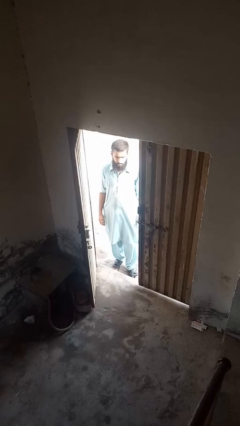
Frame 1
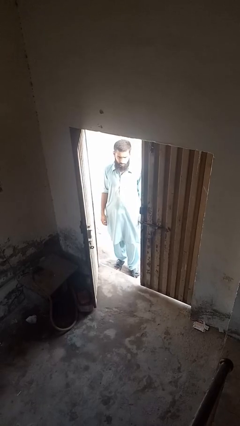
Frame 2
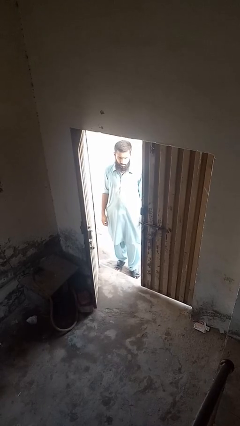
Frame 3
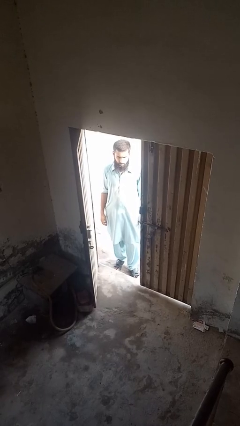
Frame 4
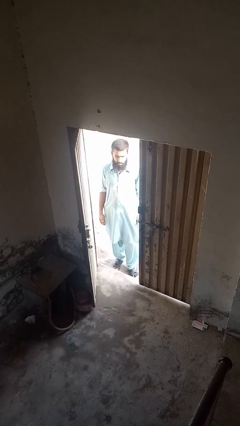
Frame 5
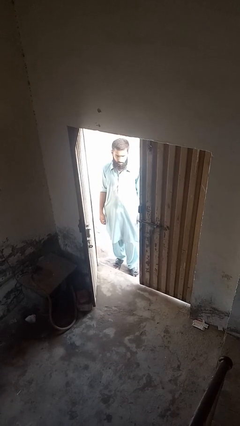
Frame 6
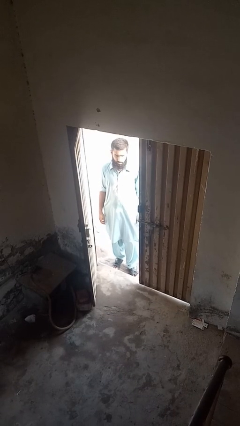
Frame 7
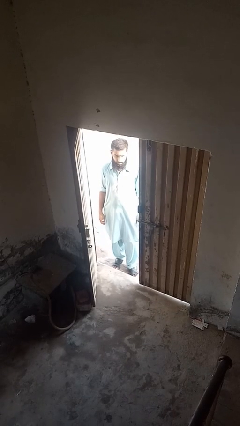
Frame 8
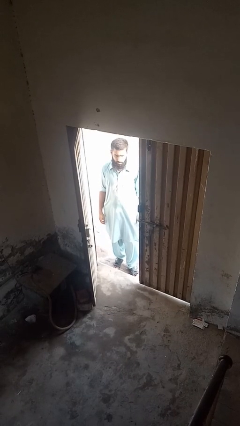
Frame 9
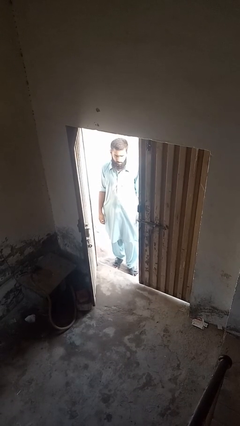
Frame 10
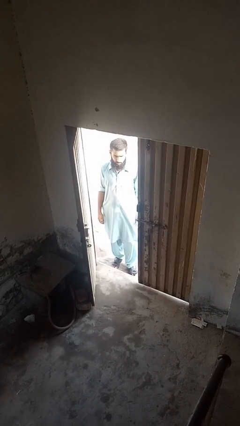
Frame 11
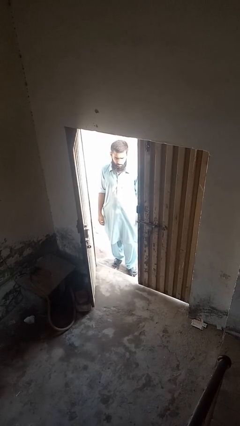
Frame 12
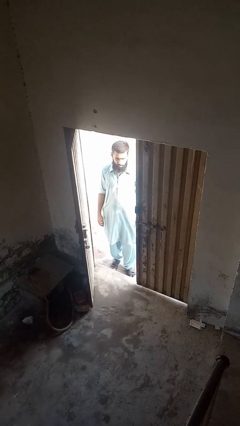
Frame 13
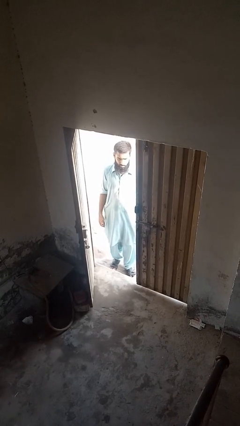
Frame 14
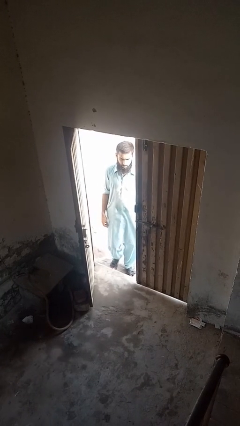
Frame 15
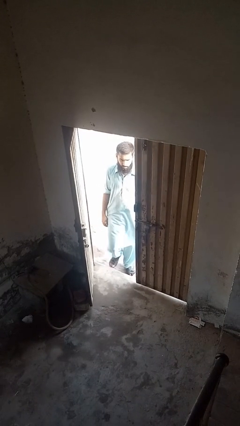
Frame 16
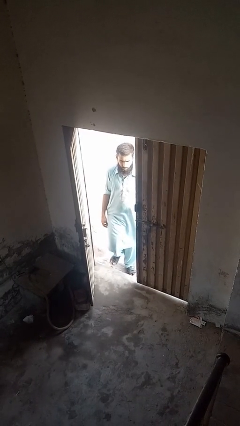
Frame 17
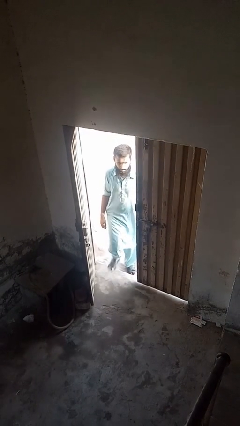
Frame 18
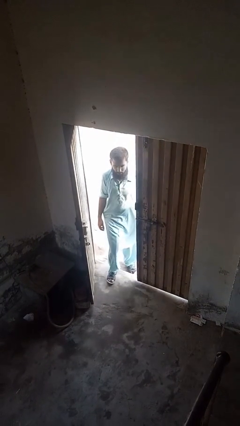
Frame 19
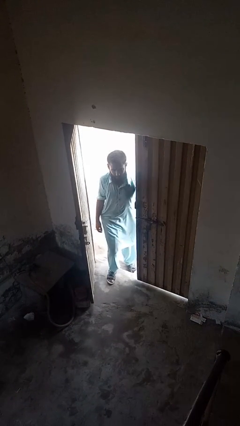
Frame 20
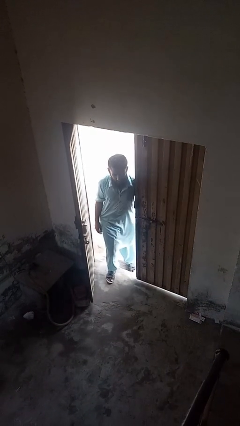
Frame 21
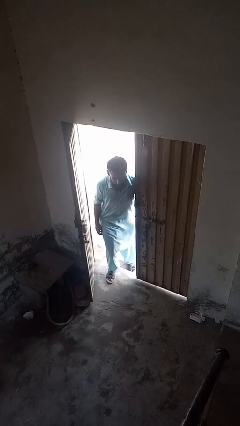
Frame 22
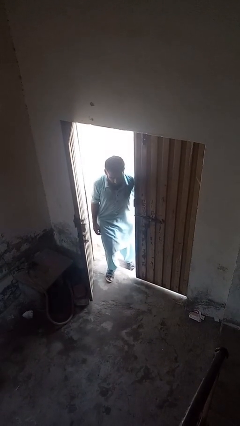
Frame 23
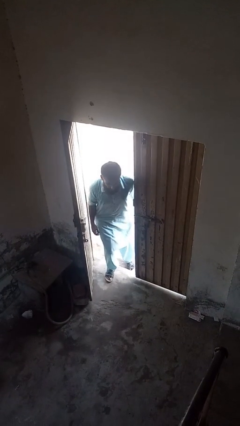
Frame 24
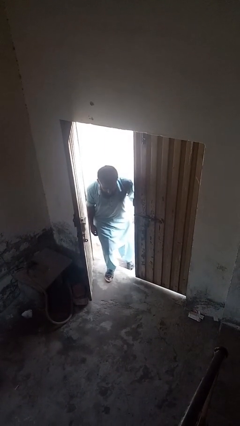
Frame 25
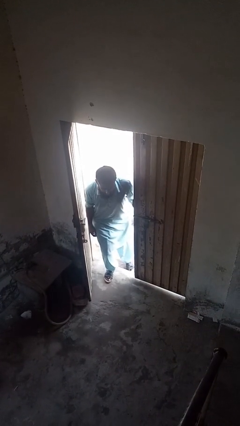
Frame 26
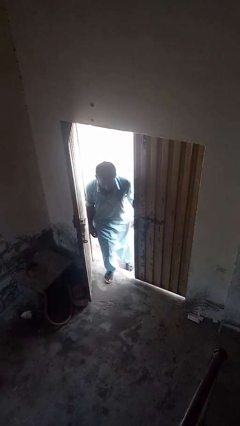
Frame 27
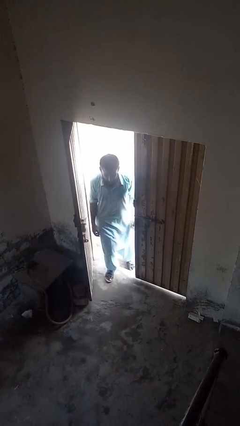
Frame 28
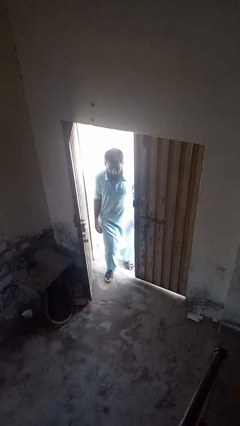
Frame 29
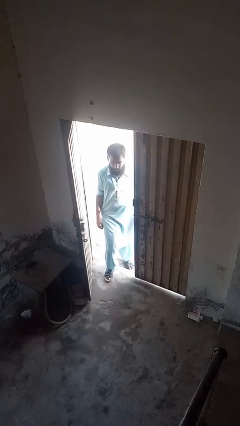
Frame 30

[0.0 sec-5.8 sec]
person bumps into wall

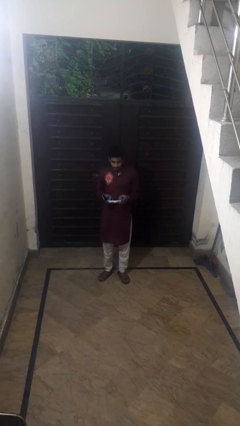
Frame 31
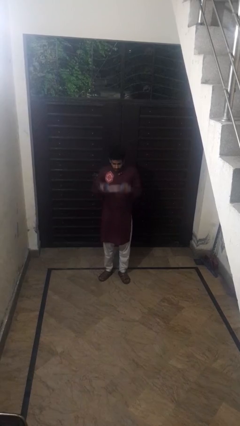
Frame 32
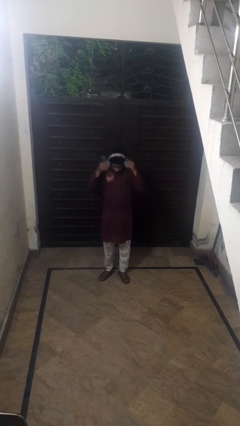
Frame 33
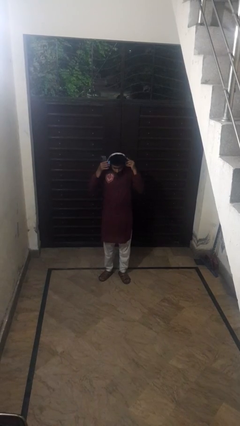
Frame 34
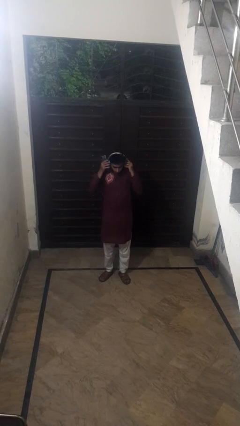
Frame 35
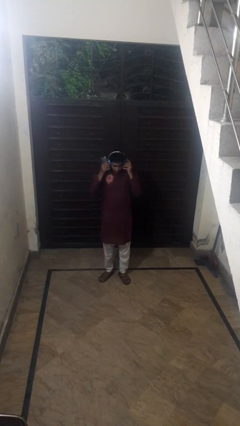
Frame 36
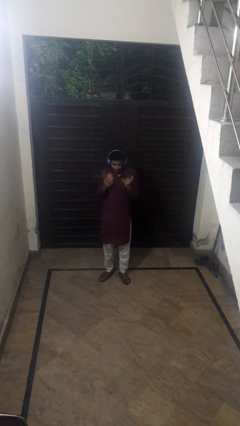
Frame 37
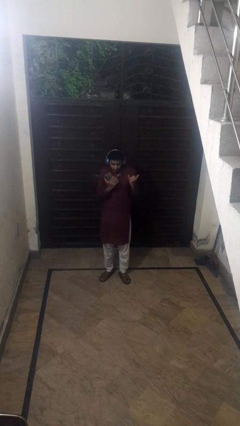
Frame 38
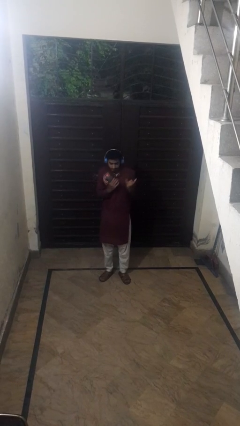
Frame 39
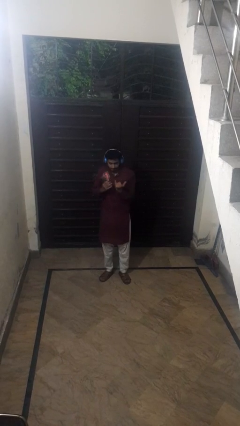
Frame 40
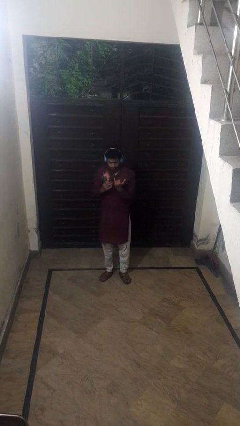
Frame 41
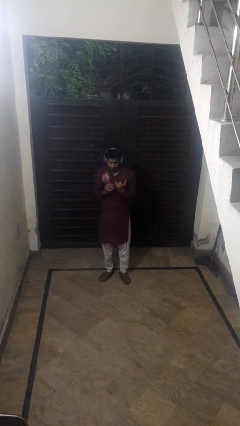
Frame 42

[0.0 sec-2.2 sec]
person puts on headphones

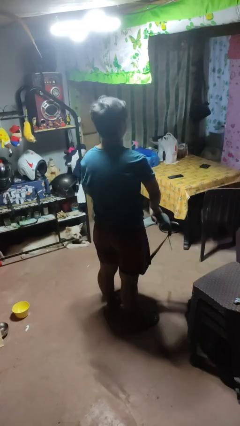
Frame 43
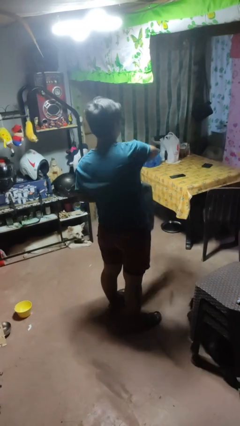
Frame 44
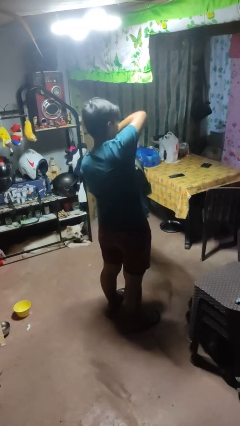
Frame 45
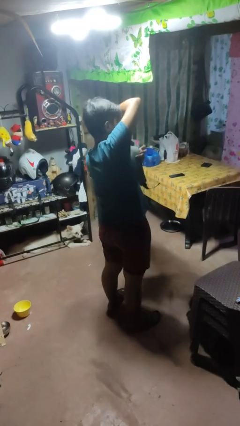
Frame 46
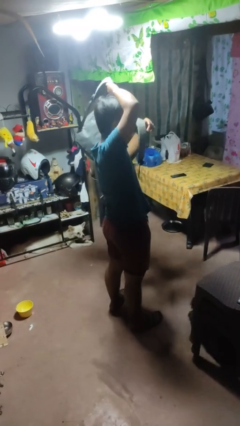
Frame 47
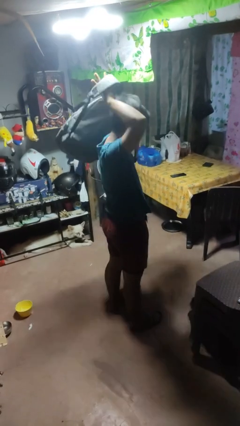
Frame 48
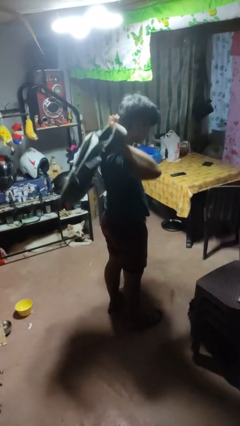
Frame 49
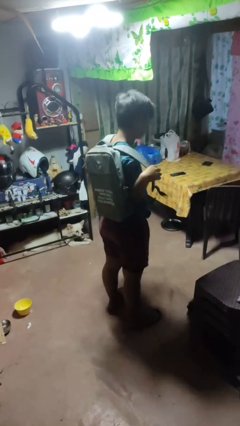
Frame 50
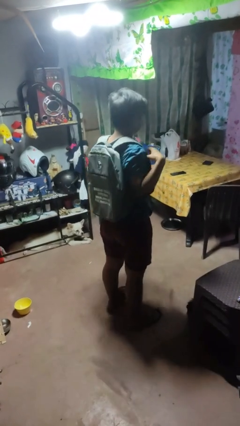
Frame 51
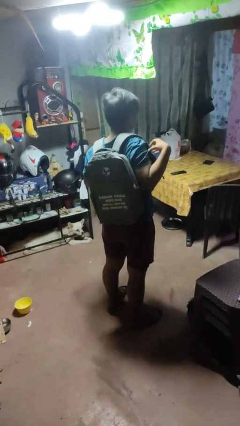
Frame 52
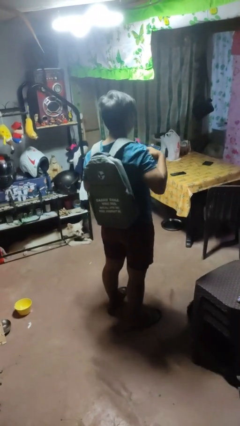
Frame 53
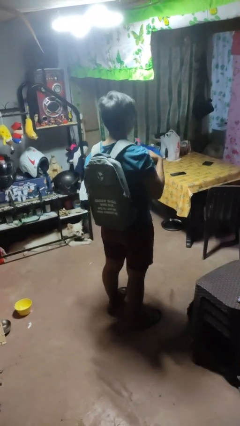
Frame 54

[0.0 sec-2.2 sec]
person puts on backpack

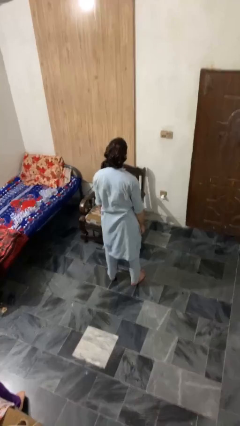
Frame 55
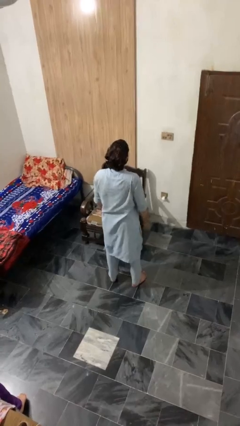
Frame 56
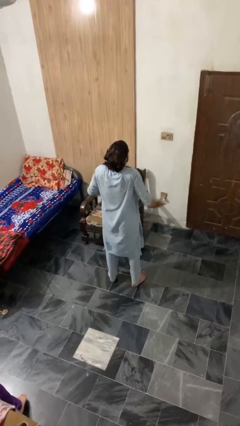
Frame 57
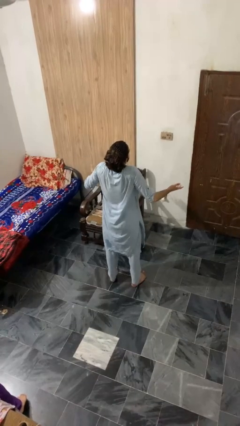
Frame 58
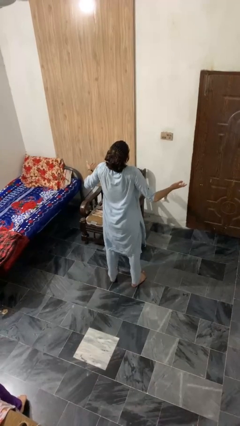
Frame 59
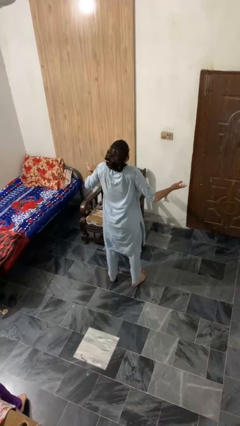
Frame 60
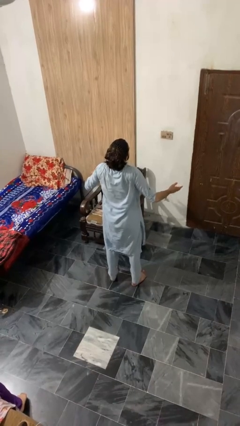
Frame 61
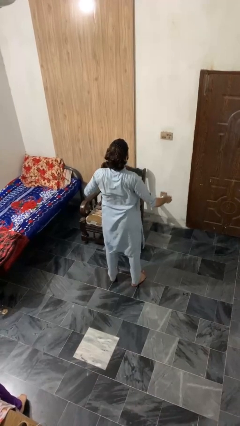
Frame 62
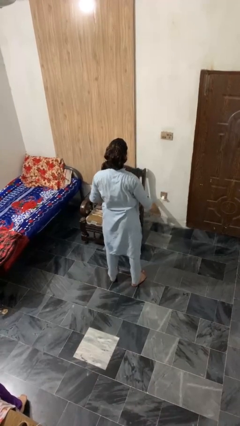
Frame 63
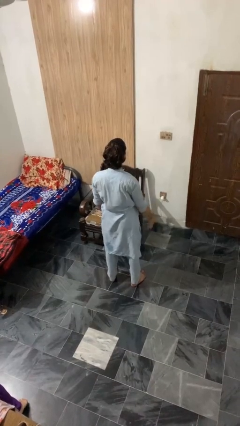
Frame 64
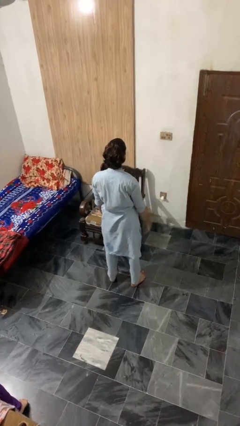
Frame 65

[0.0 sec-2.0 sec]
person shrugs

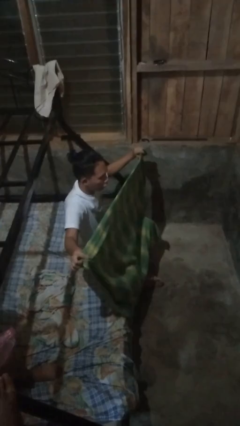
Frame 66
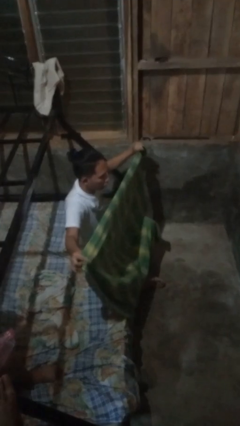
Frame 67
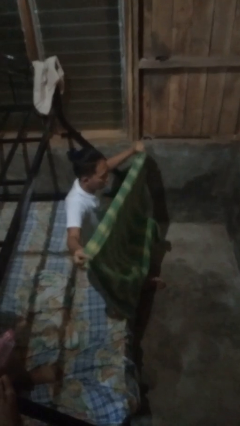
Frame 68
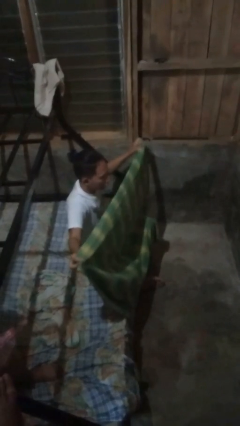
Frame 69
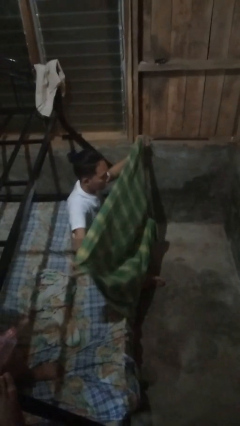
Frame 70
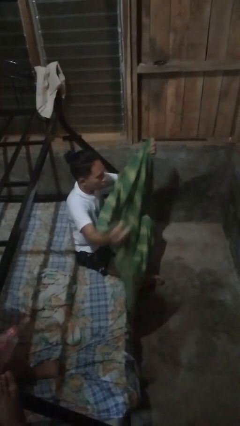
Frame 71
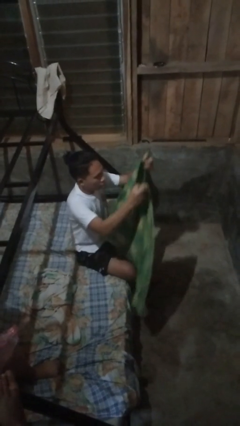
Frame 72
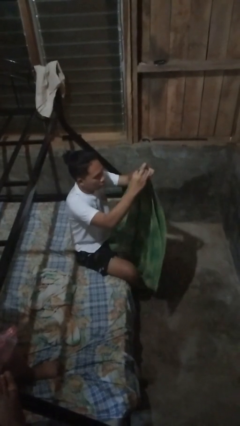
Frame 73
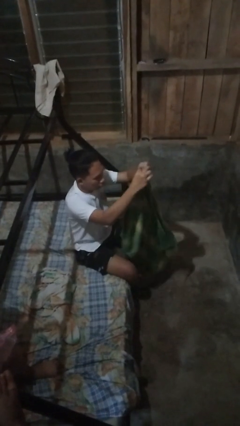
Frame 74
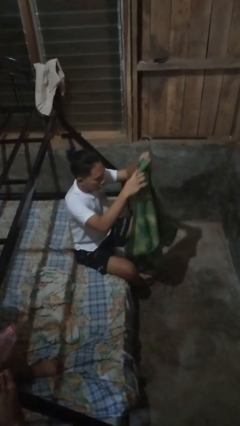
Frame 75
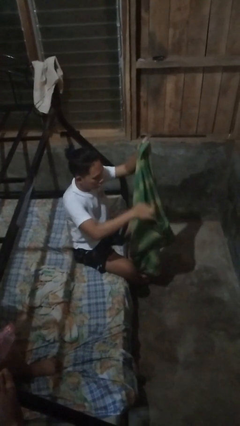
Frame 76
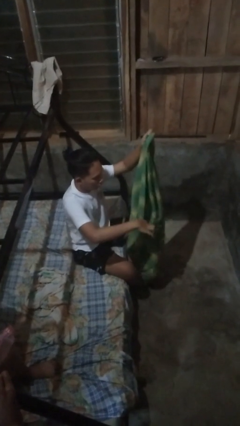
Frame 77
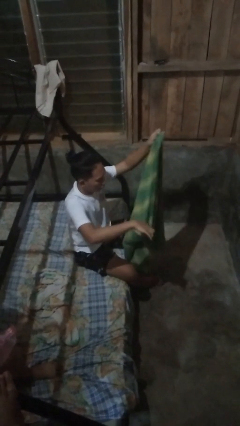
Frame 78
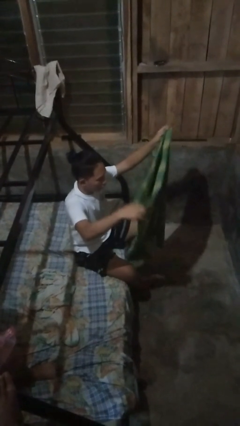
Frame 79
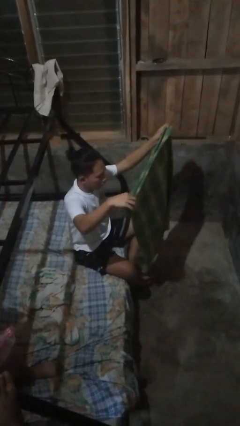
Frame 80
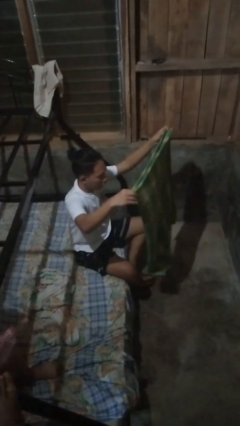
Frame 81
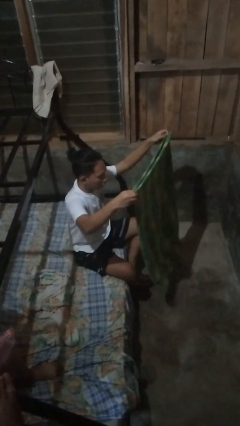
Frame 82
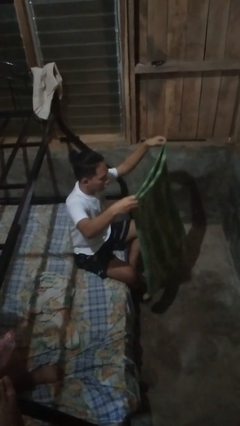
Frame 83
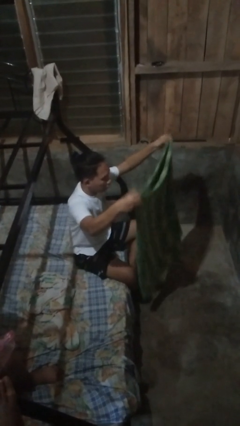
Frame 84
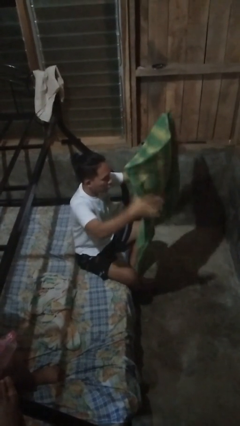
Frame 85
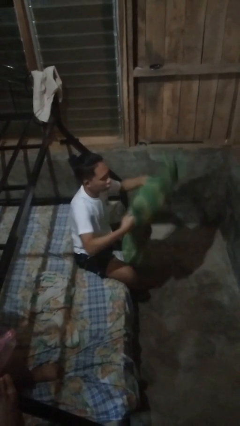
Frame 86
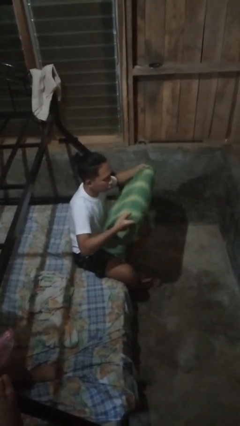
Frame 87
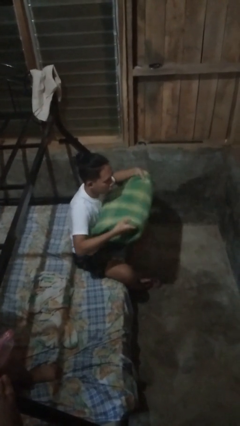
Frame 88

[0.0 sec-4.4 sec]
person folds blanket

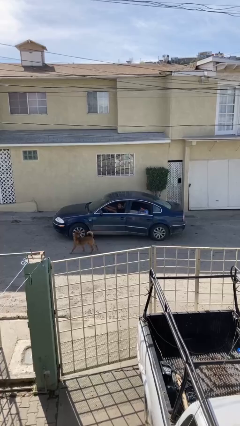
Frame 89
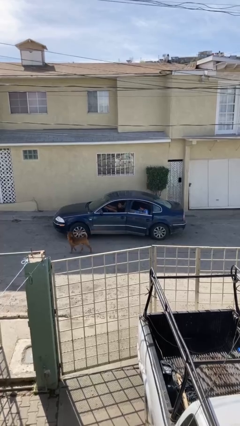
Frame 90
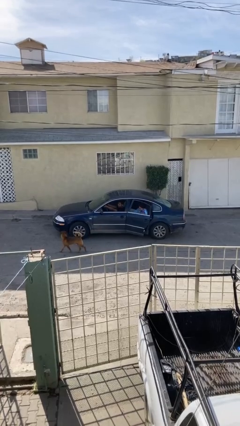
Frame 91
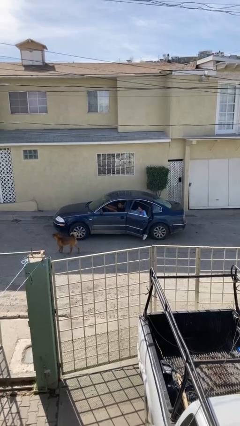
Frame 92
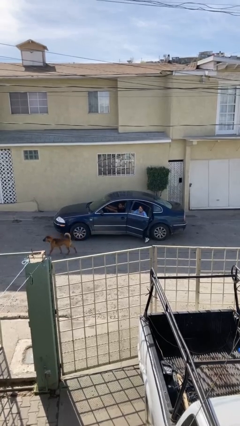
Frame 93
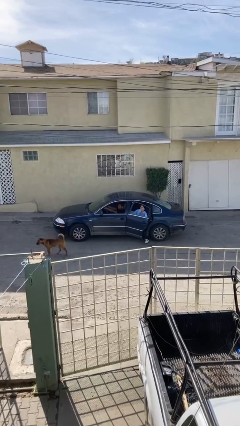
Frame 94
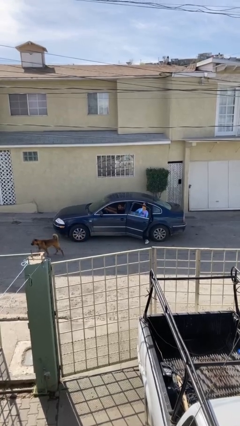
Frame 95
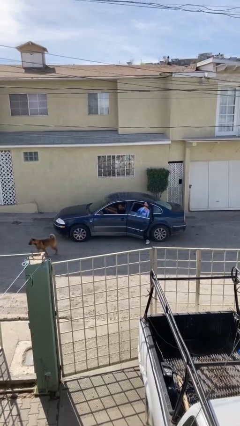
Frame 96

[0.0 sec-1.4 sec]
car drops off person
